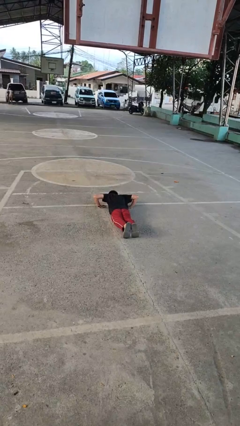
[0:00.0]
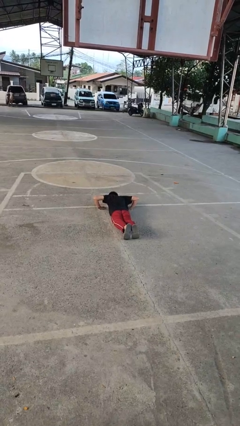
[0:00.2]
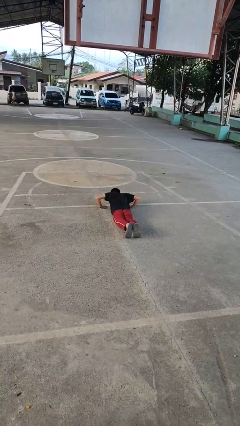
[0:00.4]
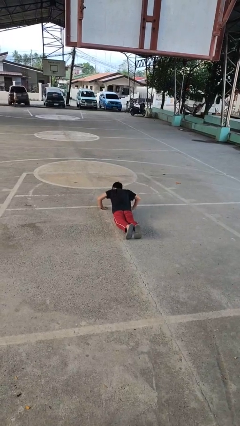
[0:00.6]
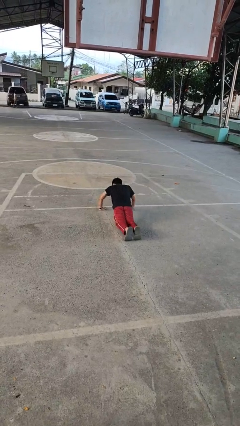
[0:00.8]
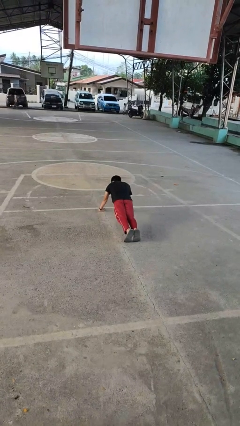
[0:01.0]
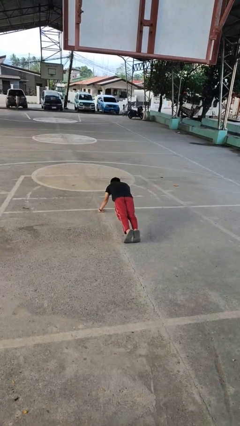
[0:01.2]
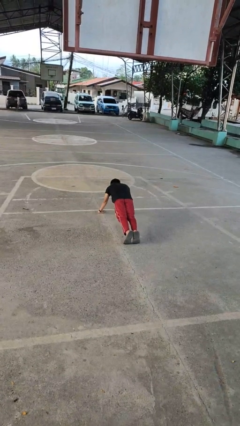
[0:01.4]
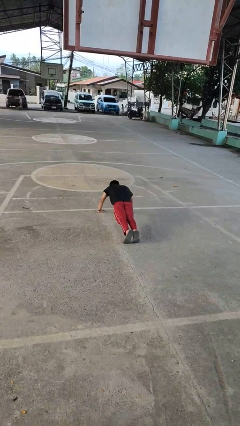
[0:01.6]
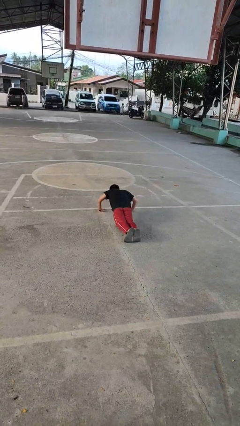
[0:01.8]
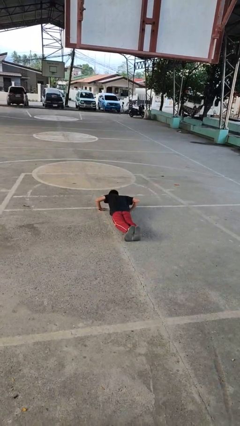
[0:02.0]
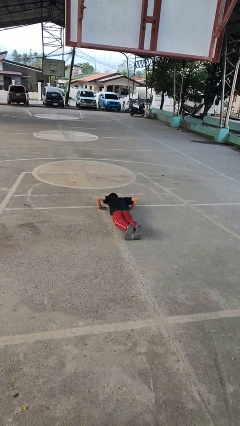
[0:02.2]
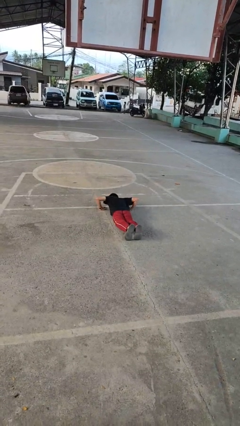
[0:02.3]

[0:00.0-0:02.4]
person exercises with pushup

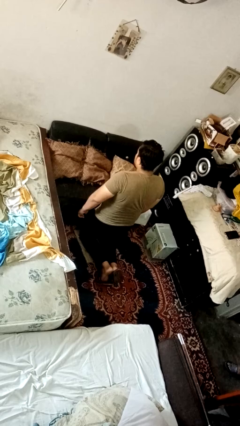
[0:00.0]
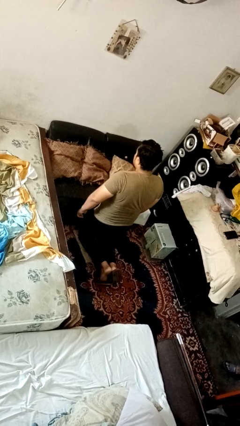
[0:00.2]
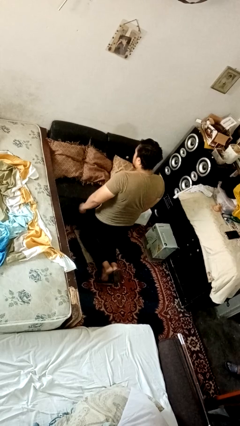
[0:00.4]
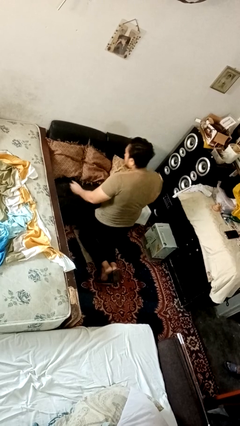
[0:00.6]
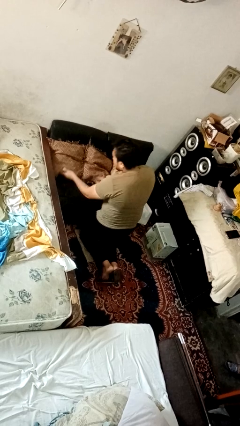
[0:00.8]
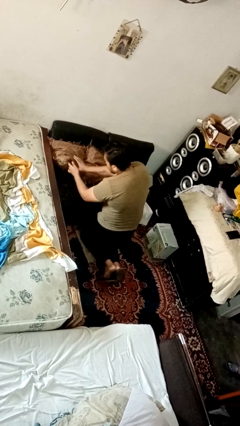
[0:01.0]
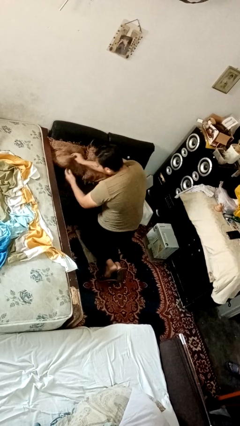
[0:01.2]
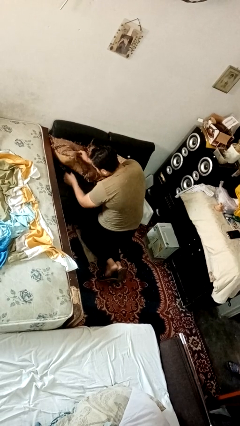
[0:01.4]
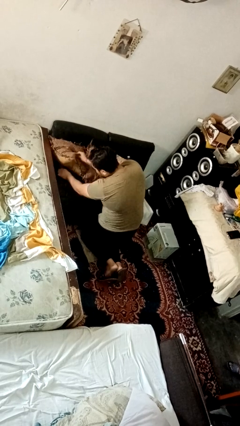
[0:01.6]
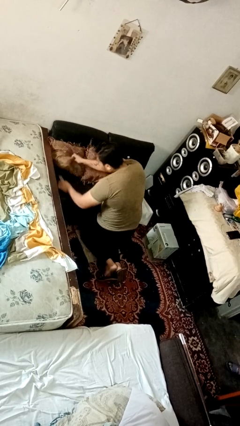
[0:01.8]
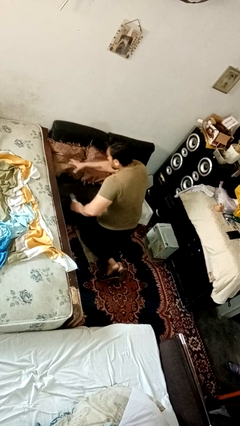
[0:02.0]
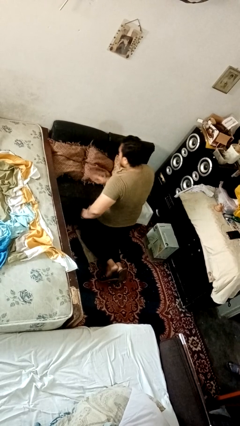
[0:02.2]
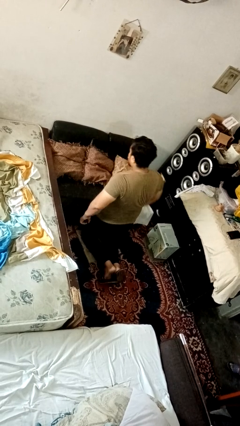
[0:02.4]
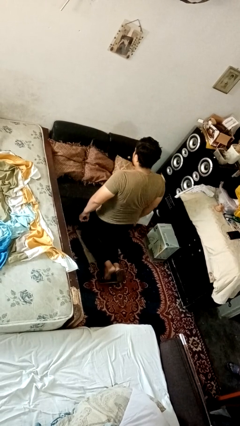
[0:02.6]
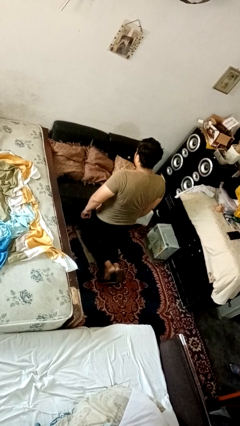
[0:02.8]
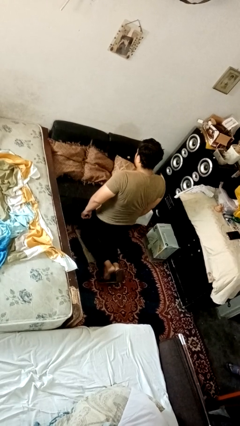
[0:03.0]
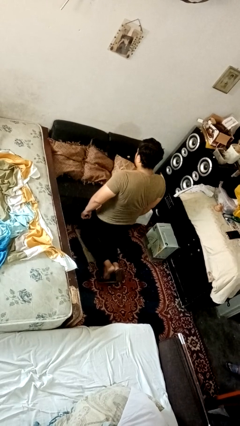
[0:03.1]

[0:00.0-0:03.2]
person searches in couch

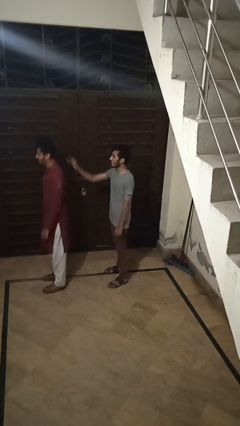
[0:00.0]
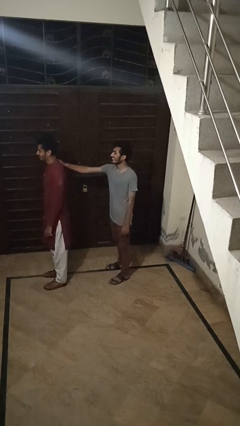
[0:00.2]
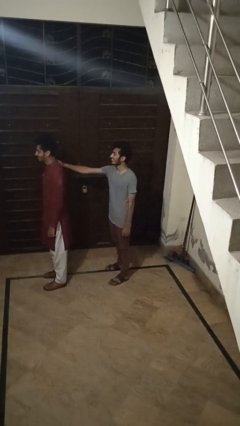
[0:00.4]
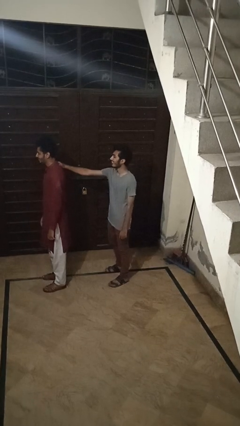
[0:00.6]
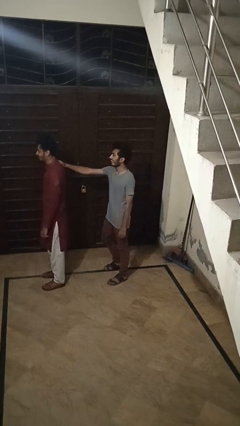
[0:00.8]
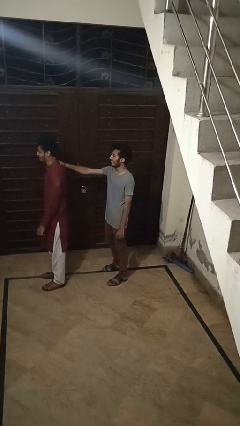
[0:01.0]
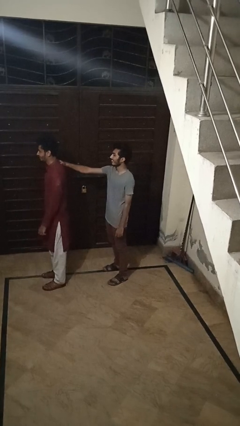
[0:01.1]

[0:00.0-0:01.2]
person grabs person by shoulder

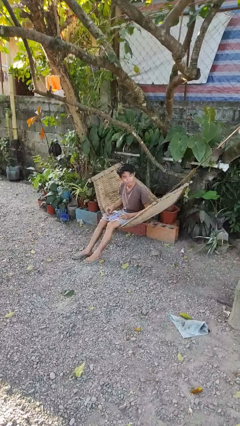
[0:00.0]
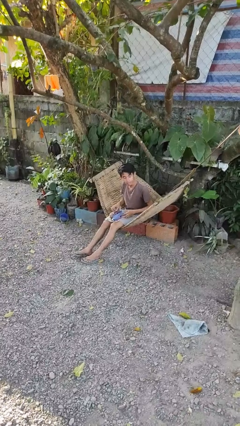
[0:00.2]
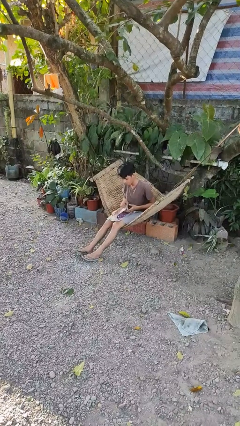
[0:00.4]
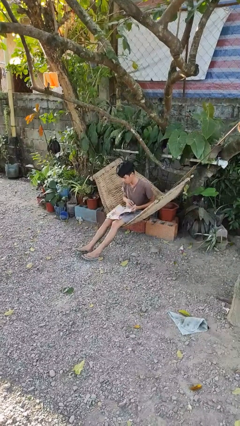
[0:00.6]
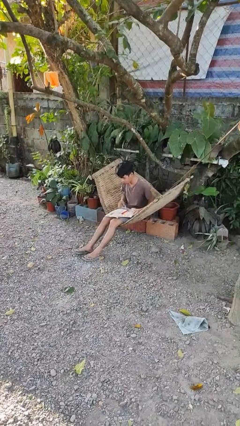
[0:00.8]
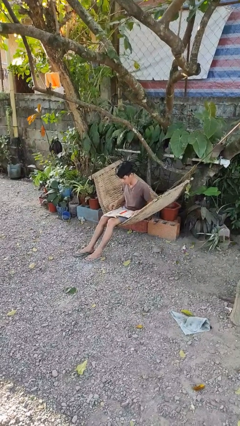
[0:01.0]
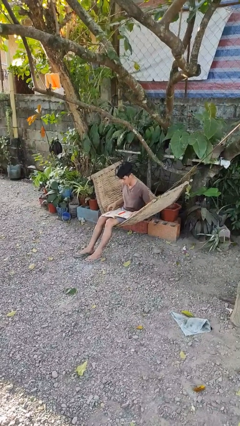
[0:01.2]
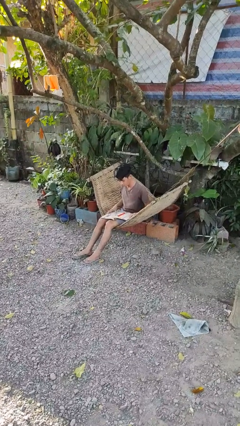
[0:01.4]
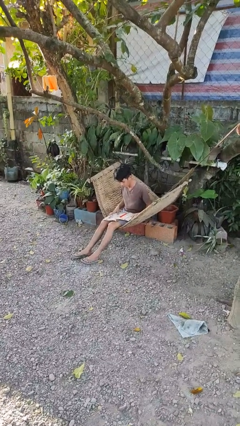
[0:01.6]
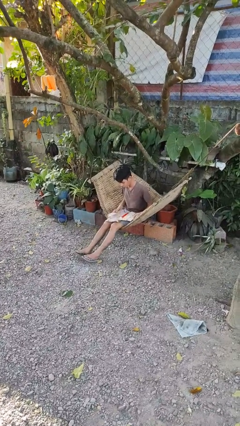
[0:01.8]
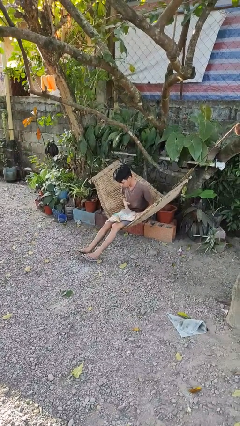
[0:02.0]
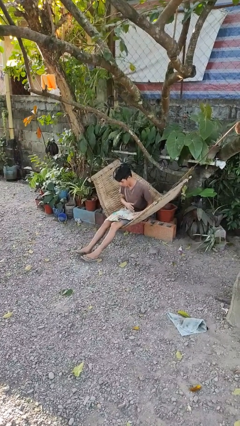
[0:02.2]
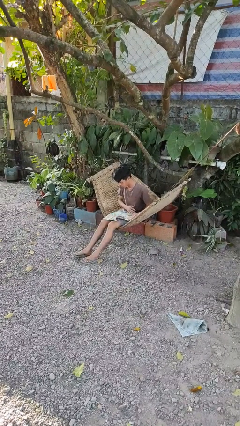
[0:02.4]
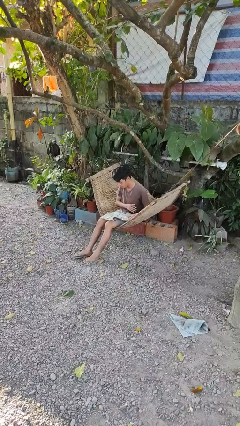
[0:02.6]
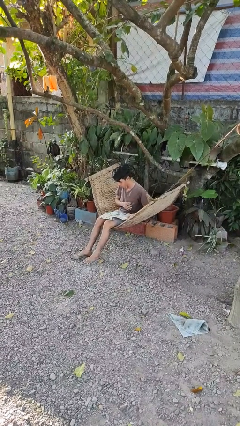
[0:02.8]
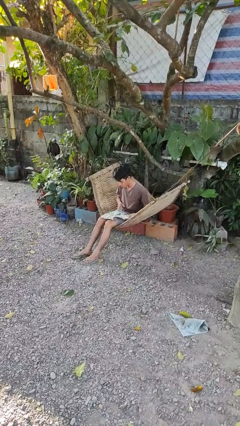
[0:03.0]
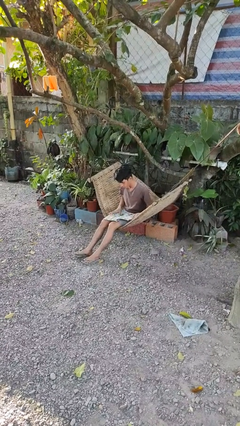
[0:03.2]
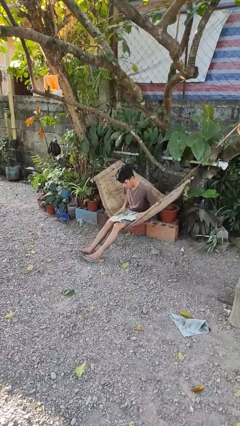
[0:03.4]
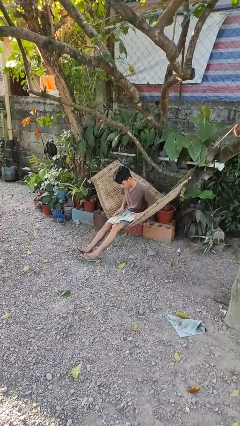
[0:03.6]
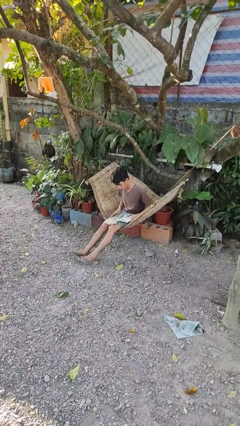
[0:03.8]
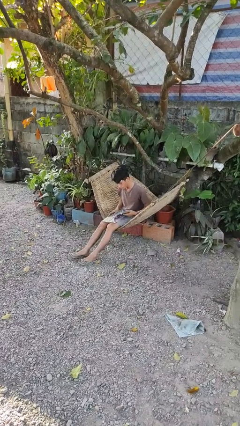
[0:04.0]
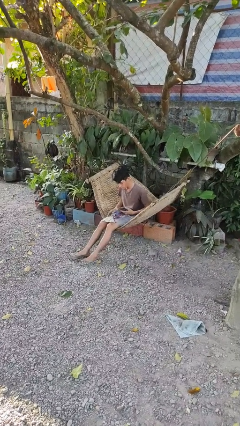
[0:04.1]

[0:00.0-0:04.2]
person reads magazine

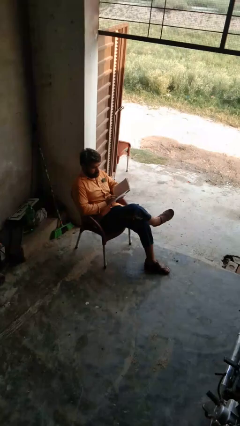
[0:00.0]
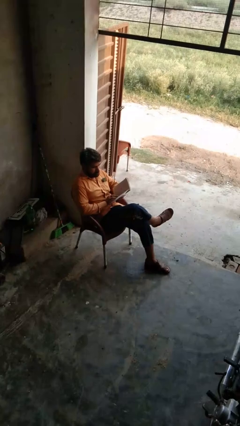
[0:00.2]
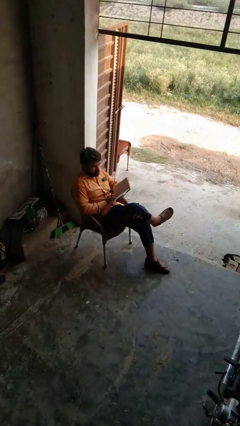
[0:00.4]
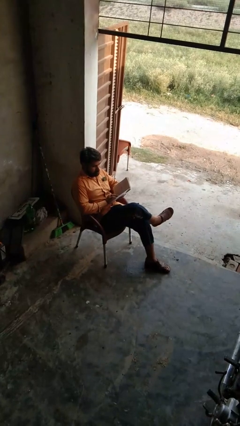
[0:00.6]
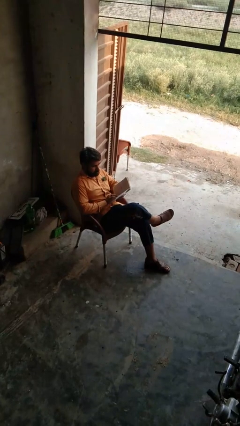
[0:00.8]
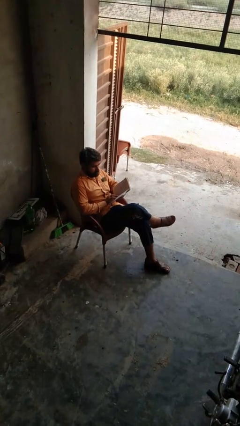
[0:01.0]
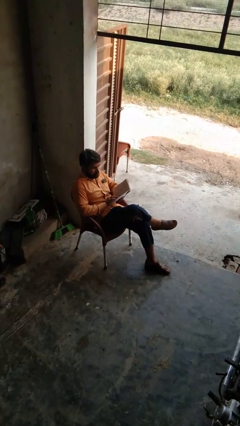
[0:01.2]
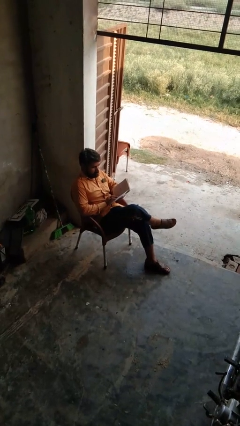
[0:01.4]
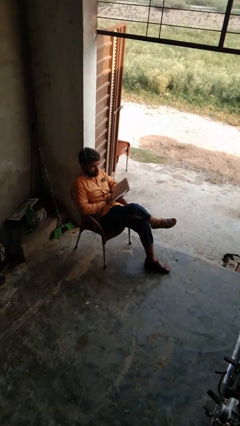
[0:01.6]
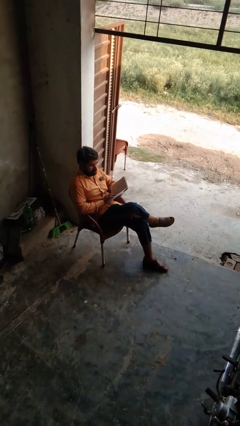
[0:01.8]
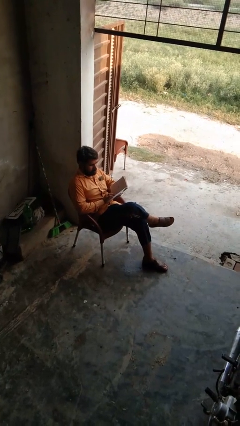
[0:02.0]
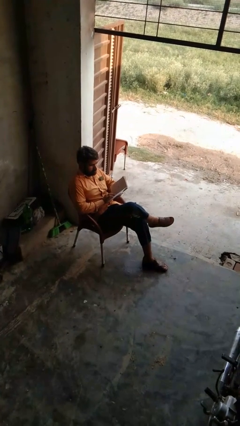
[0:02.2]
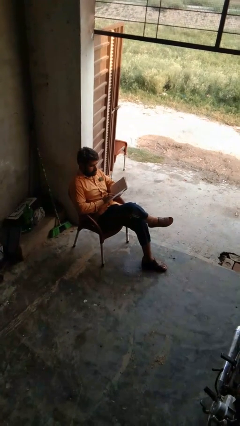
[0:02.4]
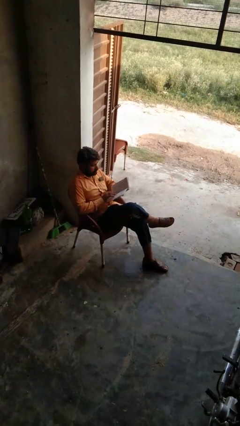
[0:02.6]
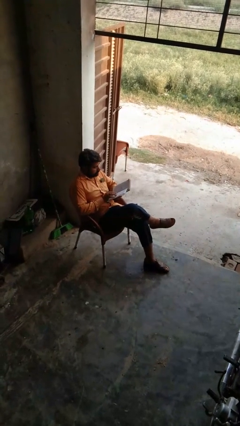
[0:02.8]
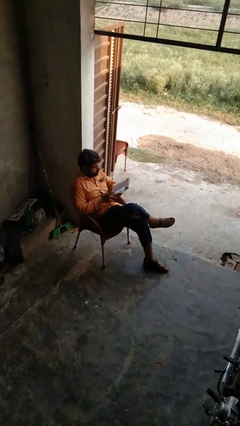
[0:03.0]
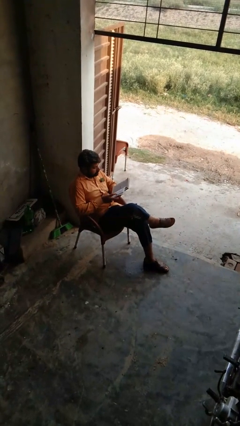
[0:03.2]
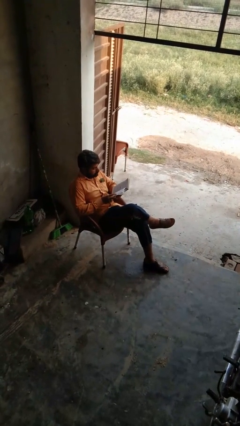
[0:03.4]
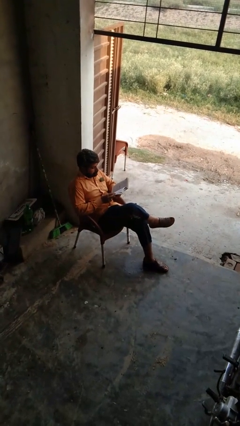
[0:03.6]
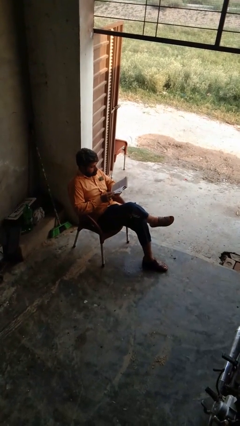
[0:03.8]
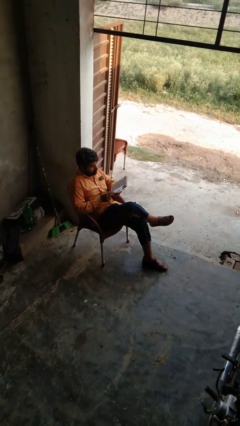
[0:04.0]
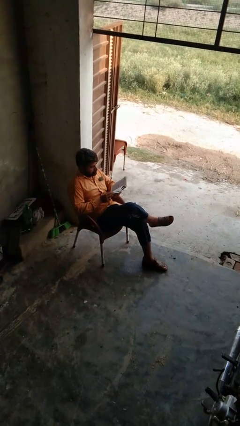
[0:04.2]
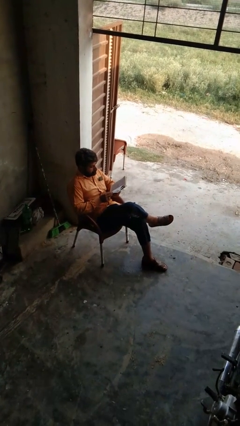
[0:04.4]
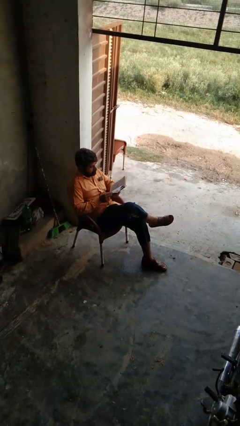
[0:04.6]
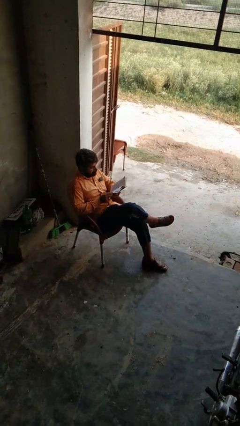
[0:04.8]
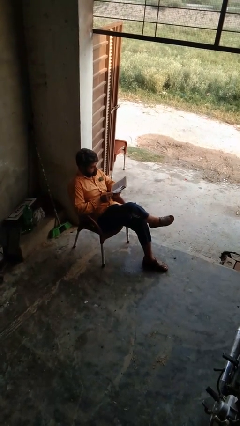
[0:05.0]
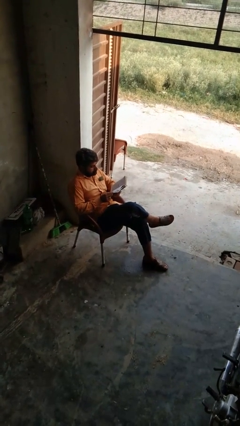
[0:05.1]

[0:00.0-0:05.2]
person reads book

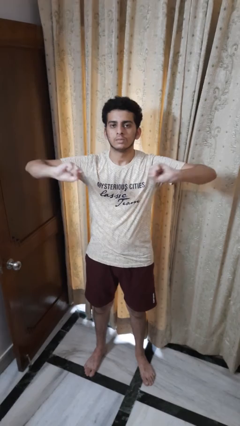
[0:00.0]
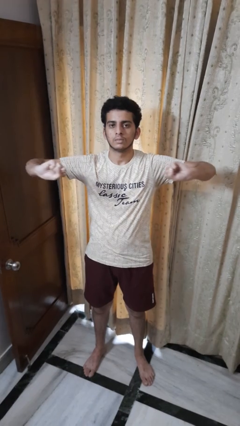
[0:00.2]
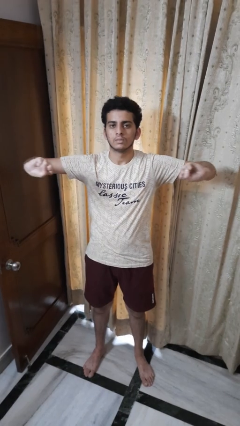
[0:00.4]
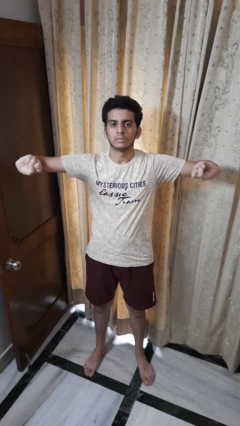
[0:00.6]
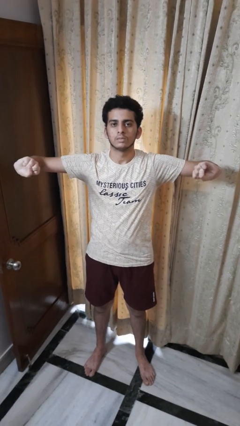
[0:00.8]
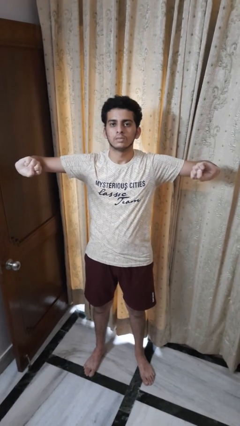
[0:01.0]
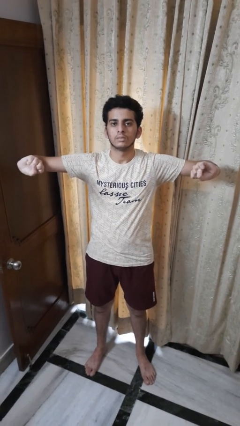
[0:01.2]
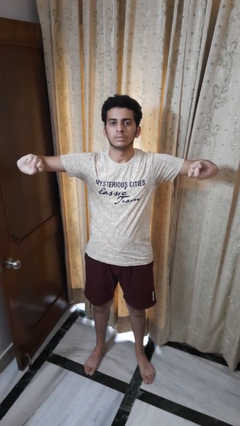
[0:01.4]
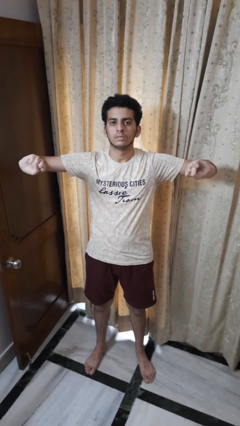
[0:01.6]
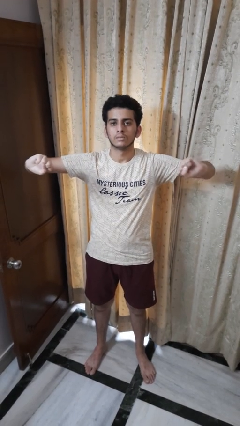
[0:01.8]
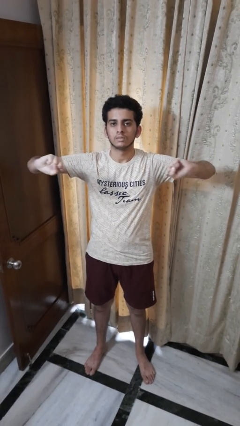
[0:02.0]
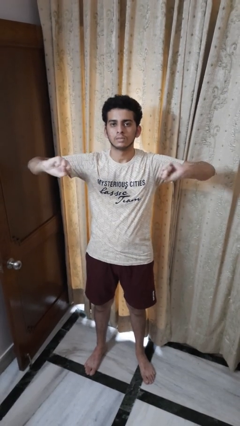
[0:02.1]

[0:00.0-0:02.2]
person gestures zoom out
